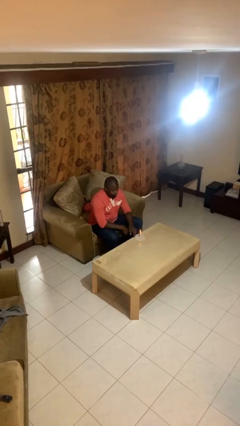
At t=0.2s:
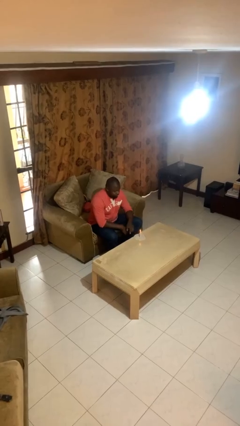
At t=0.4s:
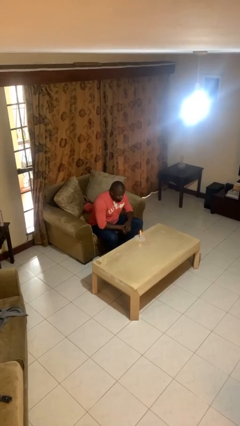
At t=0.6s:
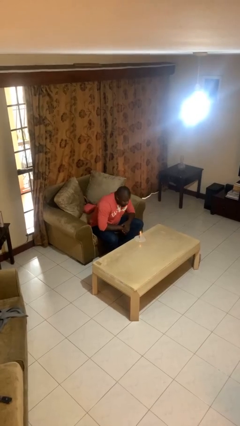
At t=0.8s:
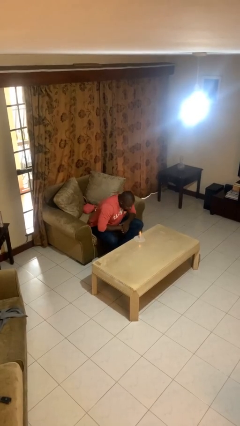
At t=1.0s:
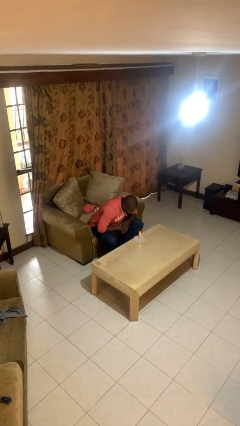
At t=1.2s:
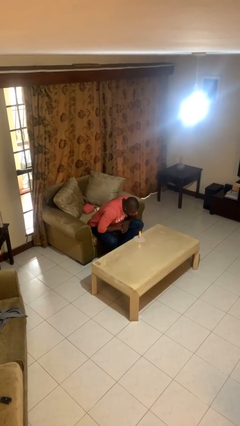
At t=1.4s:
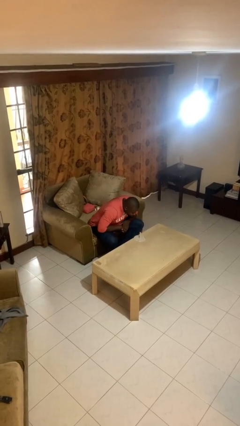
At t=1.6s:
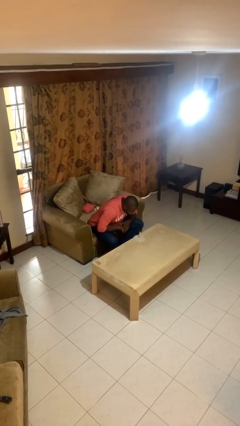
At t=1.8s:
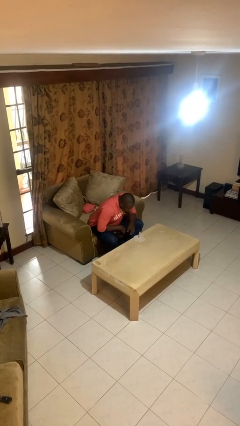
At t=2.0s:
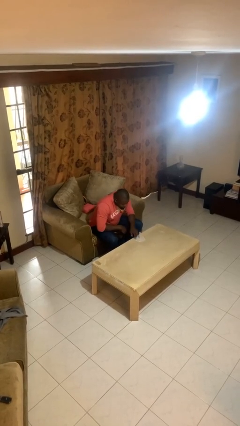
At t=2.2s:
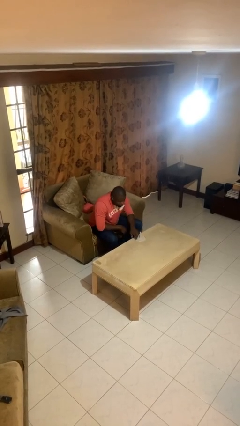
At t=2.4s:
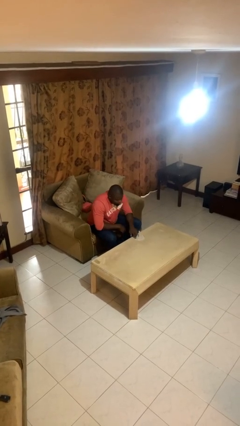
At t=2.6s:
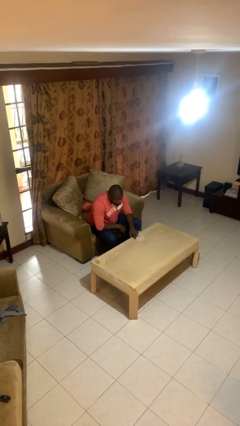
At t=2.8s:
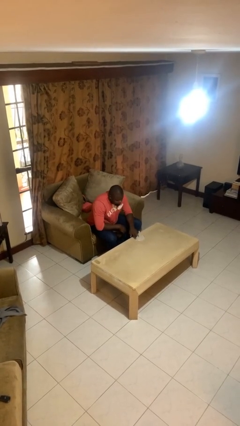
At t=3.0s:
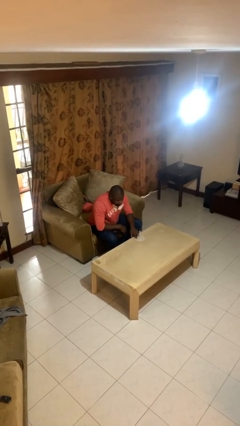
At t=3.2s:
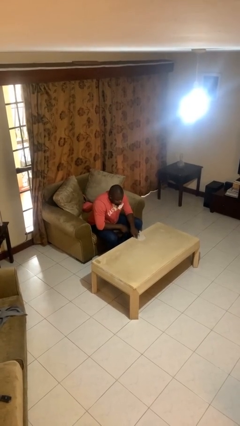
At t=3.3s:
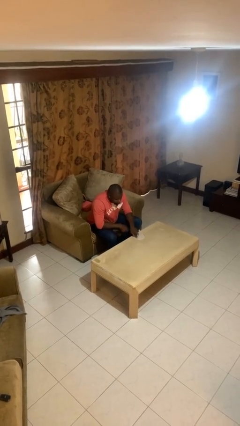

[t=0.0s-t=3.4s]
person extinguishes candle

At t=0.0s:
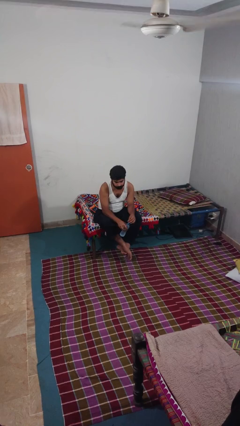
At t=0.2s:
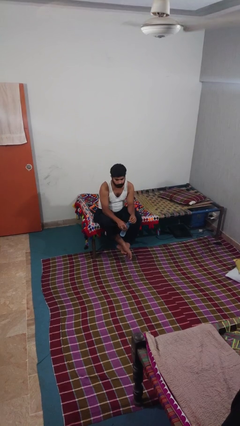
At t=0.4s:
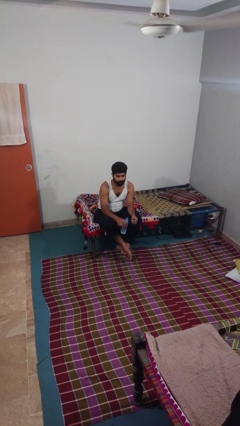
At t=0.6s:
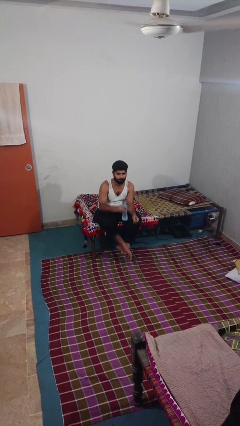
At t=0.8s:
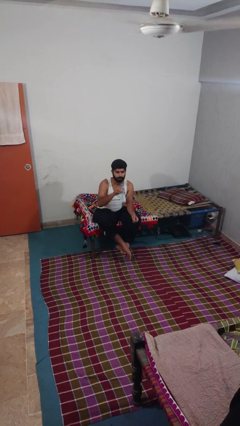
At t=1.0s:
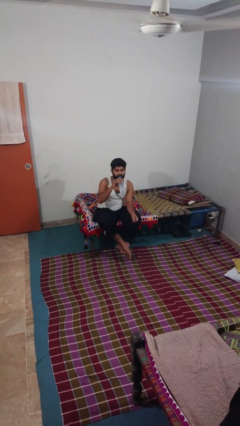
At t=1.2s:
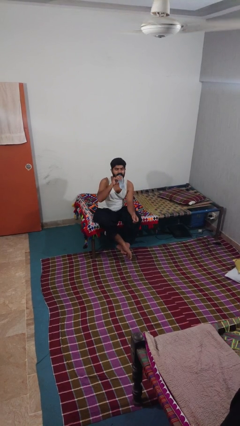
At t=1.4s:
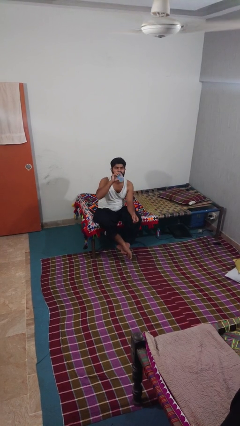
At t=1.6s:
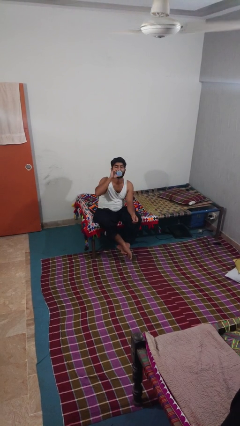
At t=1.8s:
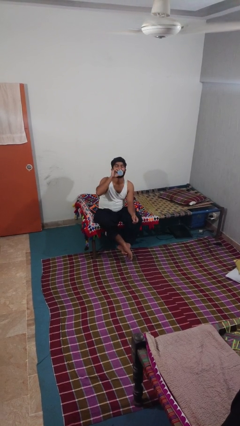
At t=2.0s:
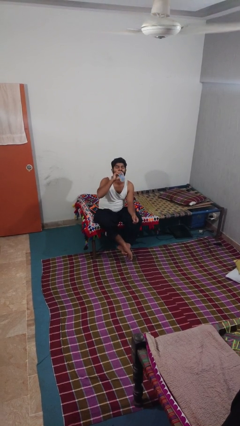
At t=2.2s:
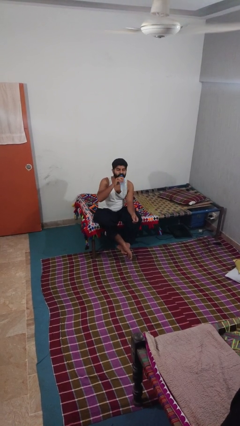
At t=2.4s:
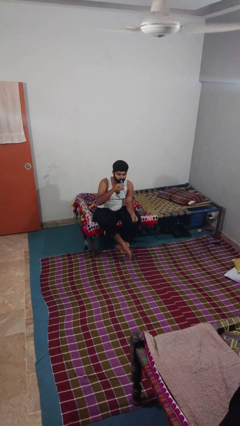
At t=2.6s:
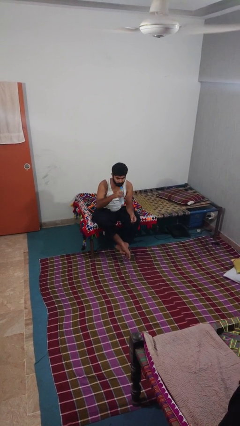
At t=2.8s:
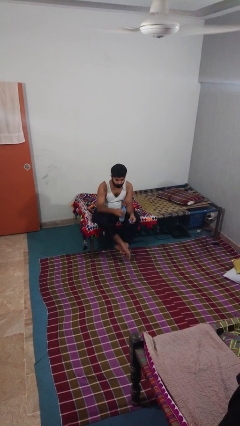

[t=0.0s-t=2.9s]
person drinks from bottle

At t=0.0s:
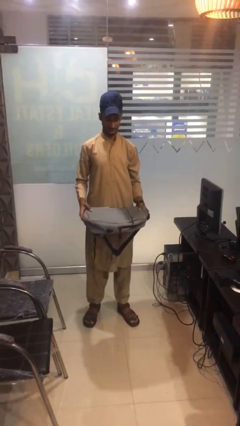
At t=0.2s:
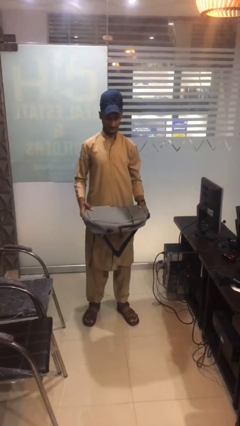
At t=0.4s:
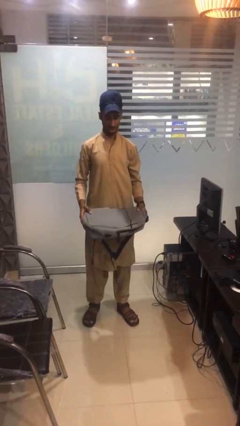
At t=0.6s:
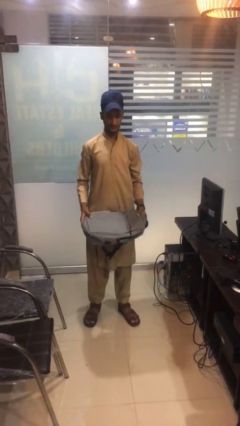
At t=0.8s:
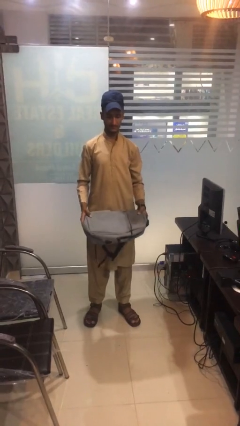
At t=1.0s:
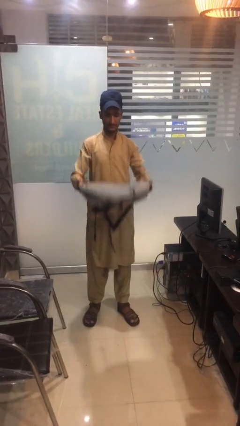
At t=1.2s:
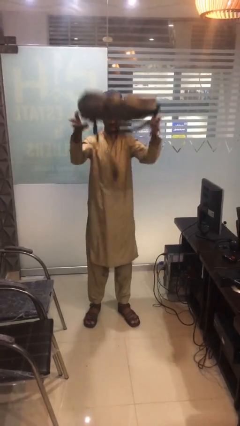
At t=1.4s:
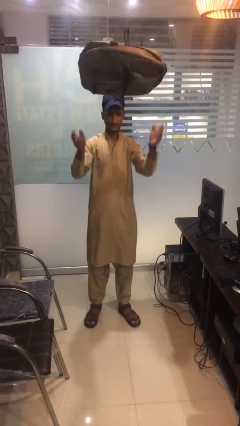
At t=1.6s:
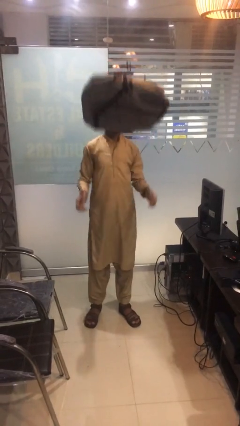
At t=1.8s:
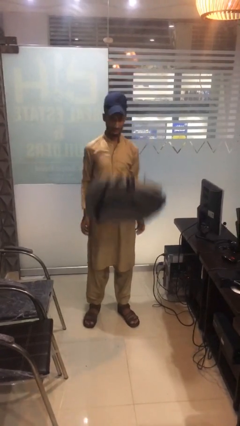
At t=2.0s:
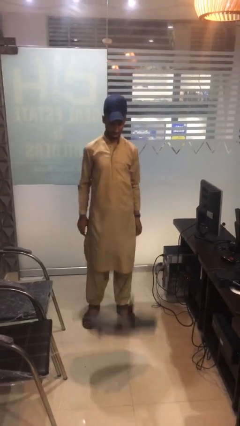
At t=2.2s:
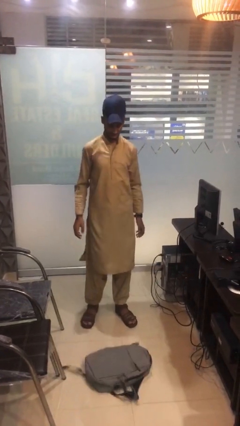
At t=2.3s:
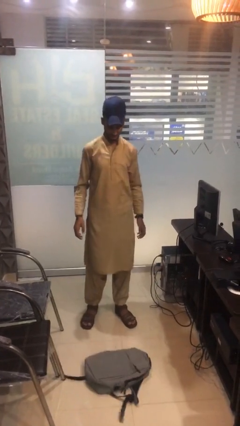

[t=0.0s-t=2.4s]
person throws object into air

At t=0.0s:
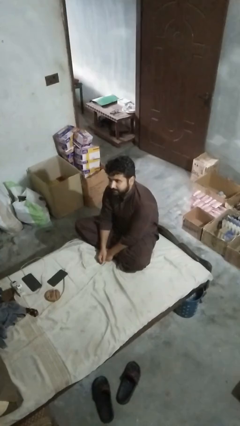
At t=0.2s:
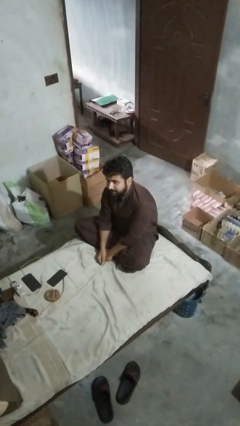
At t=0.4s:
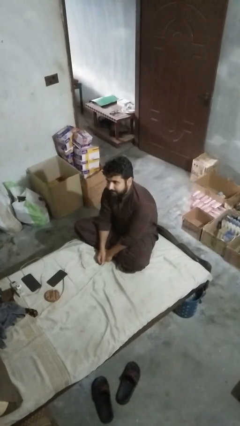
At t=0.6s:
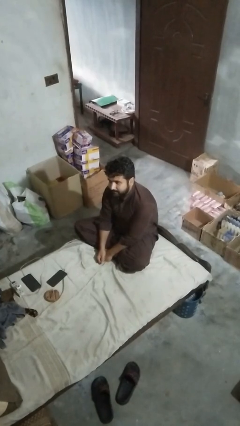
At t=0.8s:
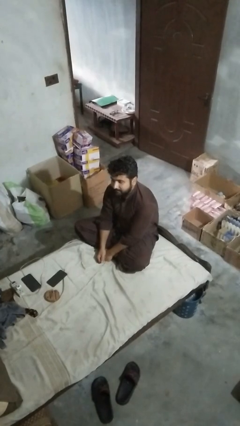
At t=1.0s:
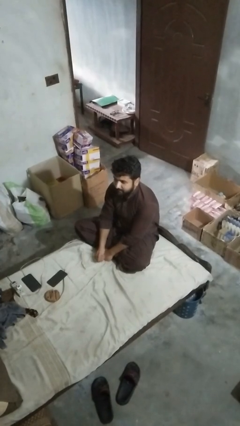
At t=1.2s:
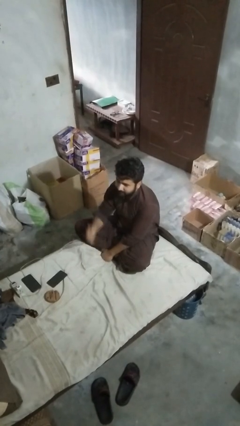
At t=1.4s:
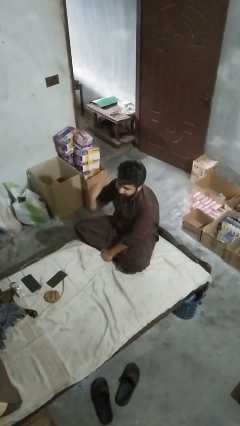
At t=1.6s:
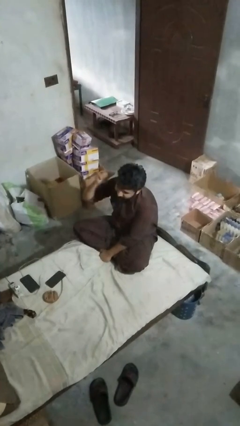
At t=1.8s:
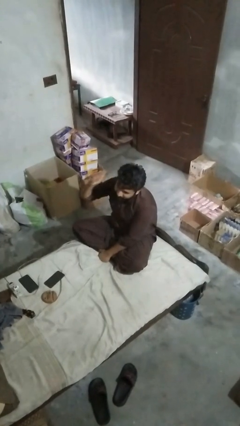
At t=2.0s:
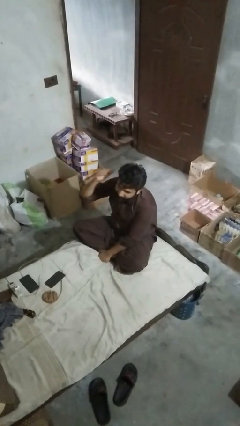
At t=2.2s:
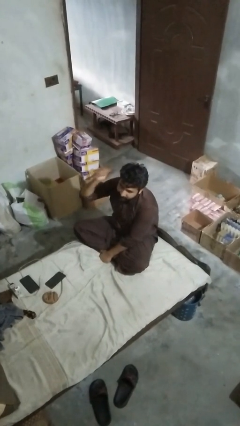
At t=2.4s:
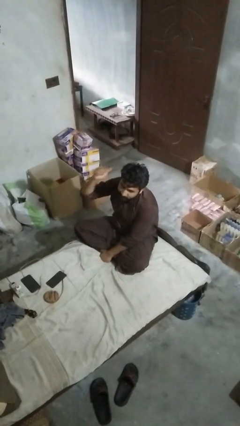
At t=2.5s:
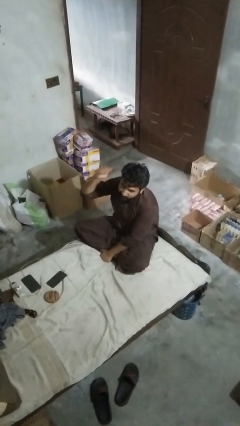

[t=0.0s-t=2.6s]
person gestures behind me

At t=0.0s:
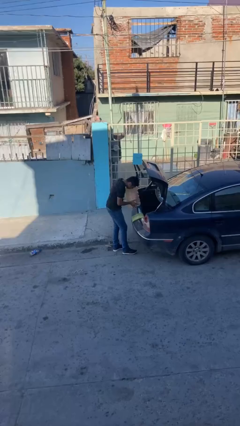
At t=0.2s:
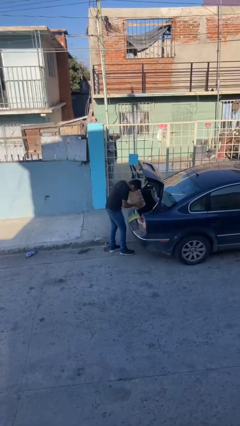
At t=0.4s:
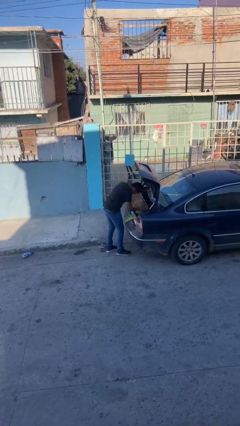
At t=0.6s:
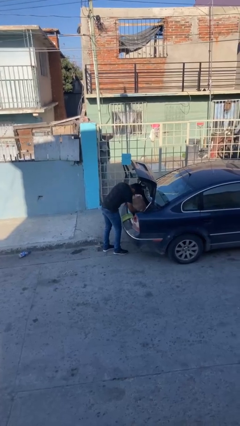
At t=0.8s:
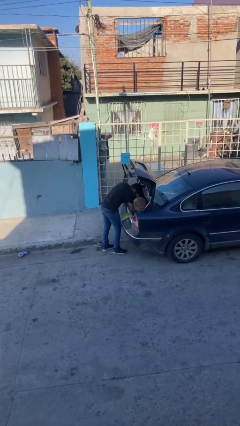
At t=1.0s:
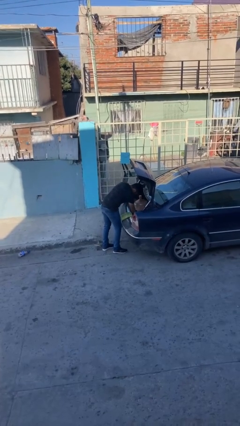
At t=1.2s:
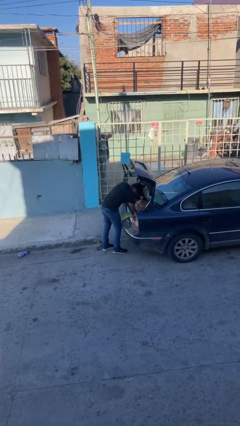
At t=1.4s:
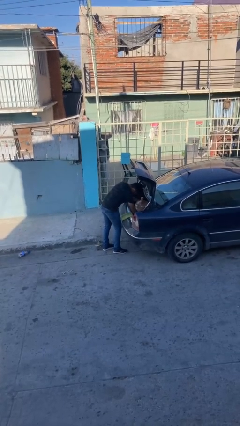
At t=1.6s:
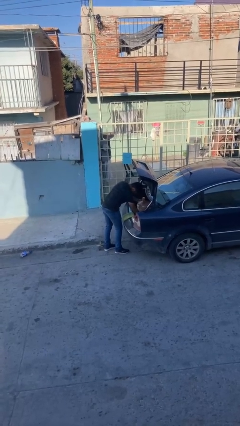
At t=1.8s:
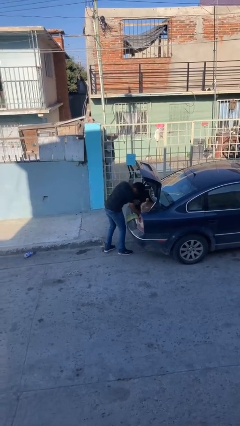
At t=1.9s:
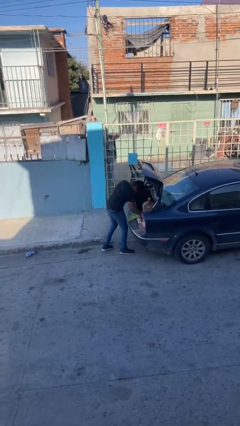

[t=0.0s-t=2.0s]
person loads car

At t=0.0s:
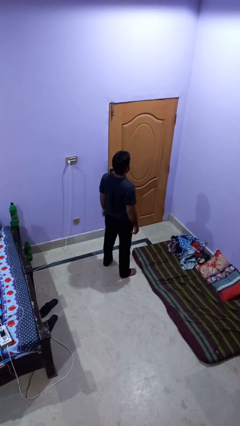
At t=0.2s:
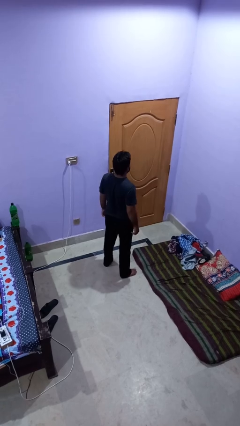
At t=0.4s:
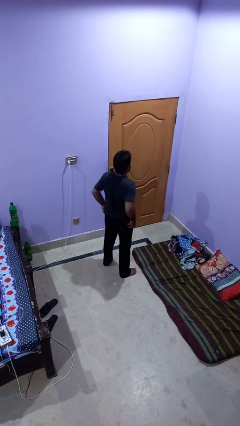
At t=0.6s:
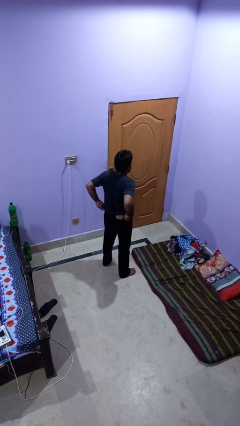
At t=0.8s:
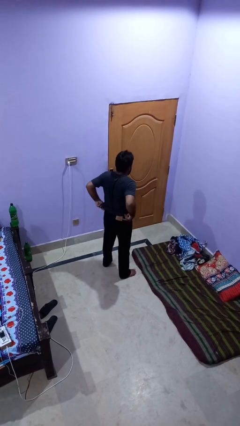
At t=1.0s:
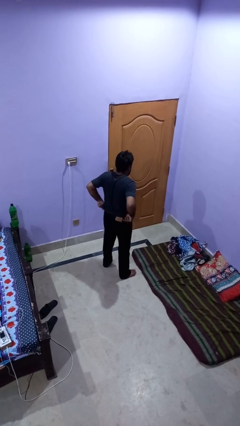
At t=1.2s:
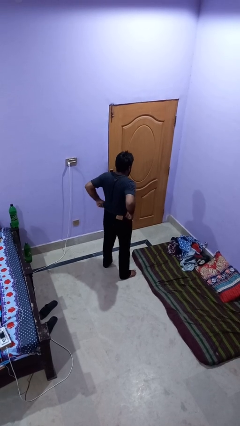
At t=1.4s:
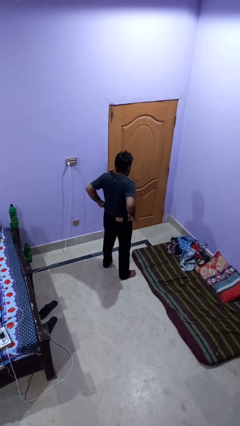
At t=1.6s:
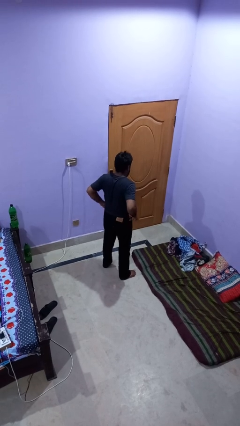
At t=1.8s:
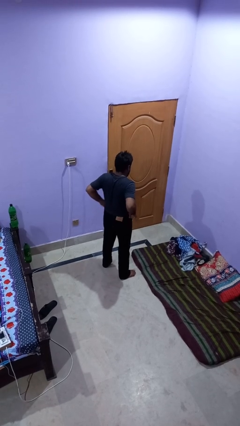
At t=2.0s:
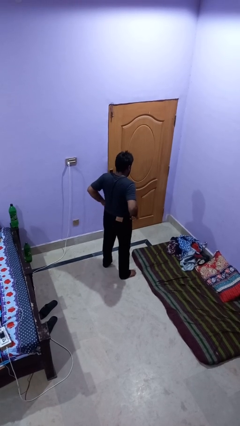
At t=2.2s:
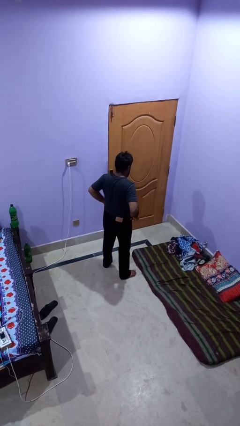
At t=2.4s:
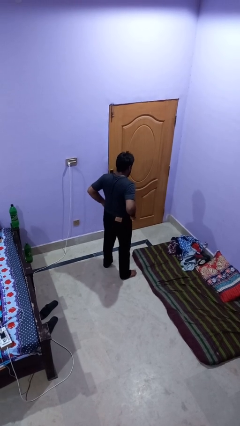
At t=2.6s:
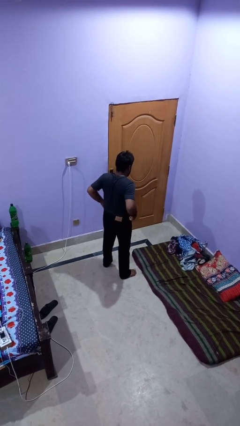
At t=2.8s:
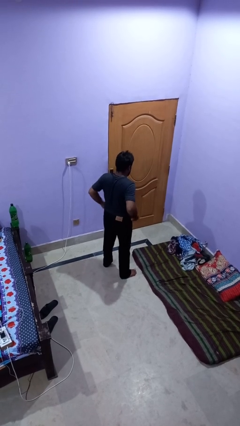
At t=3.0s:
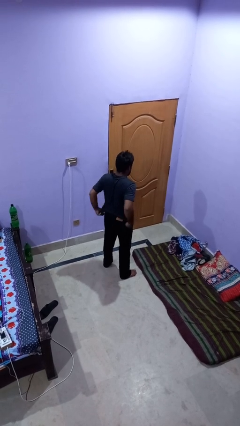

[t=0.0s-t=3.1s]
person hikes up pants

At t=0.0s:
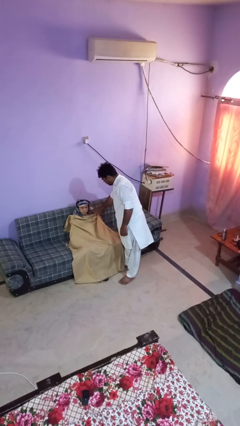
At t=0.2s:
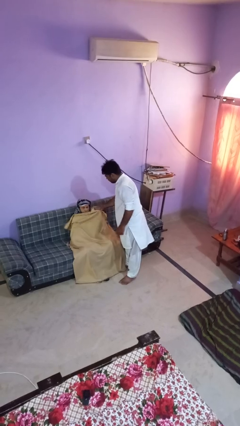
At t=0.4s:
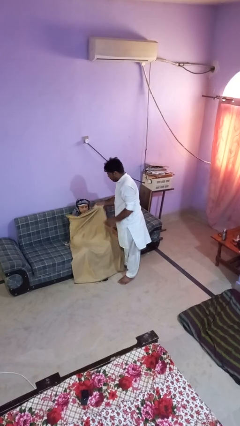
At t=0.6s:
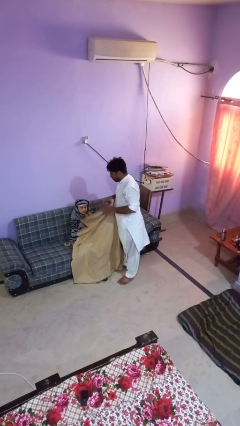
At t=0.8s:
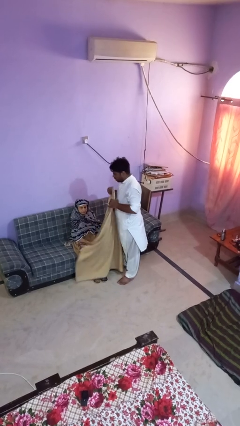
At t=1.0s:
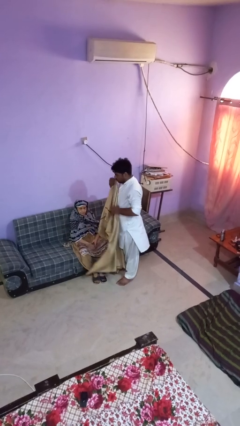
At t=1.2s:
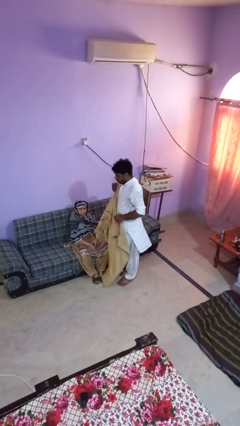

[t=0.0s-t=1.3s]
person uncovers friend with blanket
